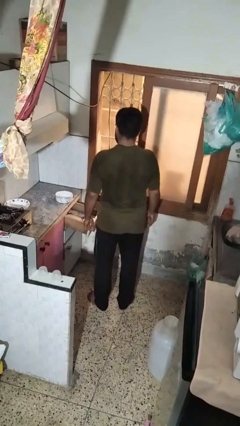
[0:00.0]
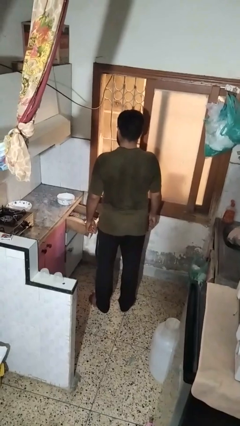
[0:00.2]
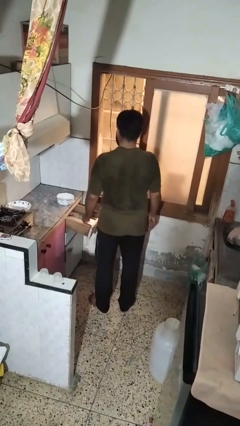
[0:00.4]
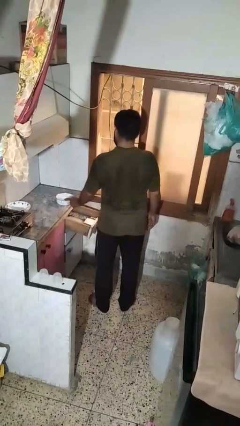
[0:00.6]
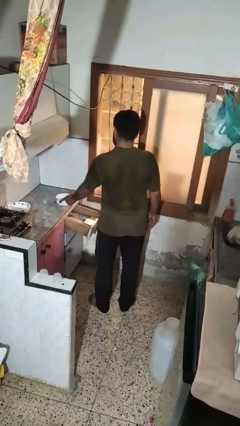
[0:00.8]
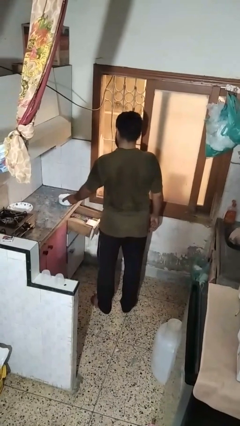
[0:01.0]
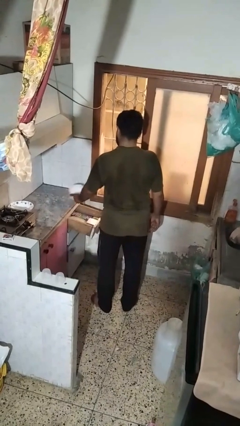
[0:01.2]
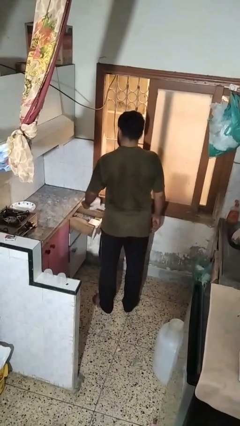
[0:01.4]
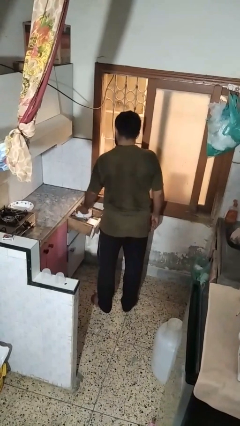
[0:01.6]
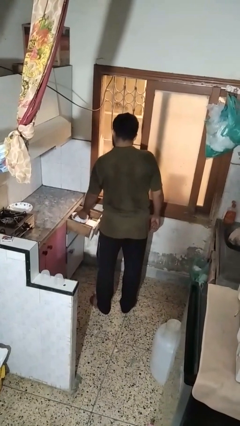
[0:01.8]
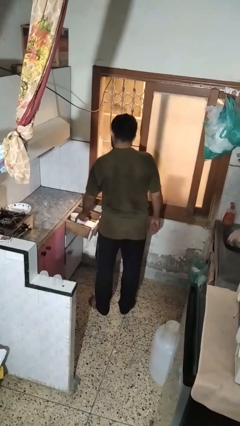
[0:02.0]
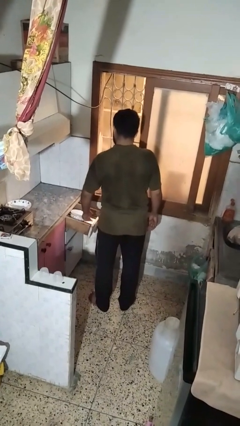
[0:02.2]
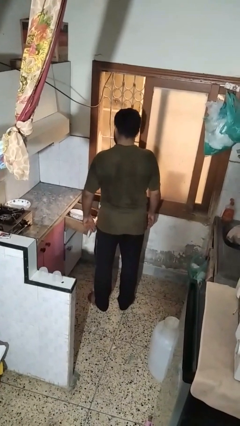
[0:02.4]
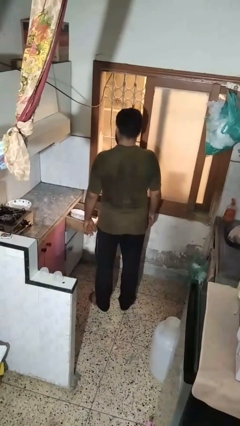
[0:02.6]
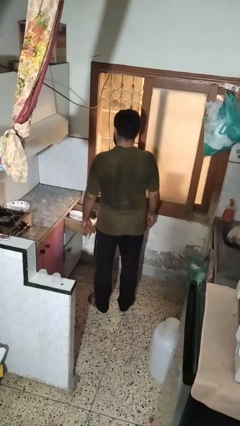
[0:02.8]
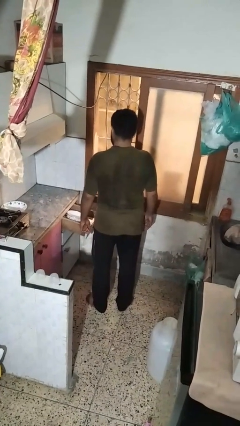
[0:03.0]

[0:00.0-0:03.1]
person puts object into kitchen drawer

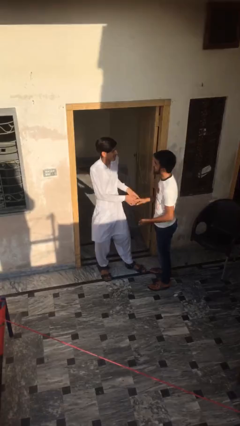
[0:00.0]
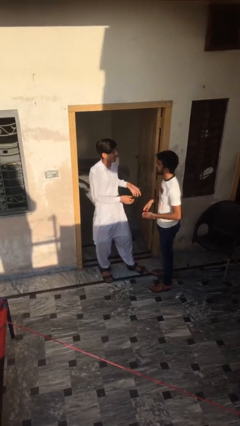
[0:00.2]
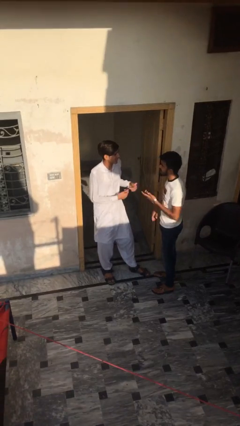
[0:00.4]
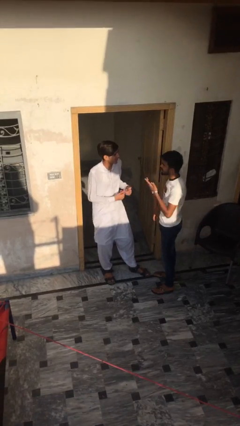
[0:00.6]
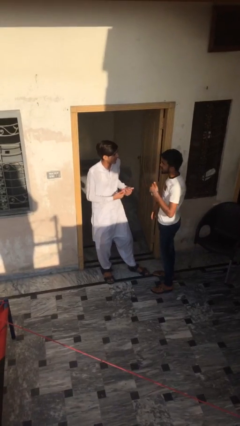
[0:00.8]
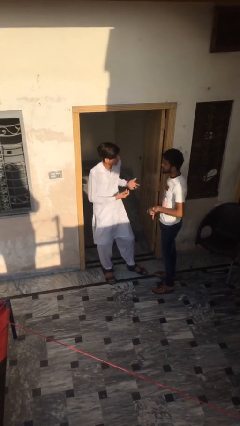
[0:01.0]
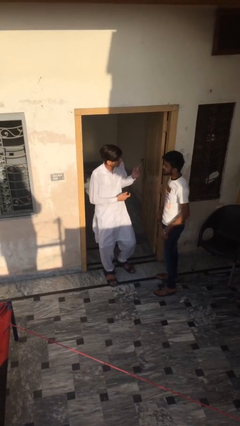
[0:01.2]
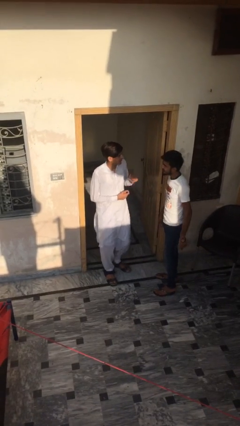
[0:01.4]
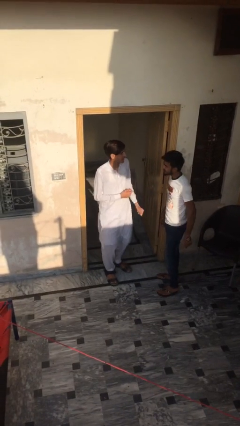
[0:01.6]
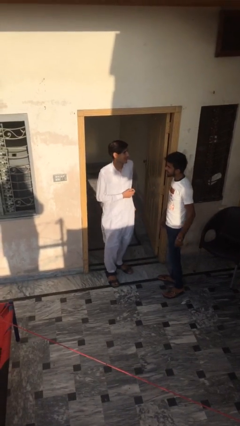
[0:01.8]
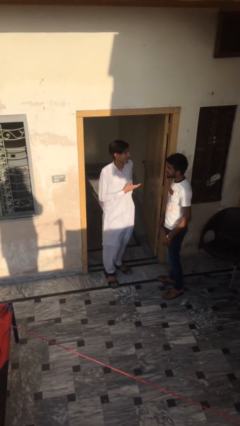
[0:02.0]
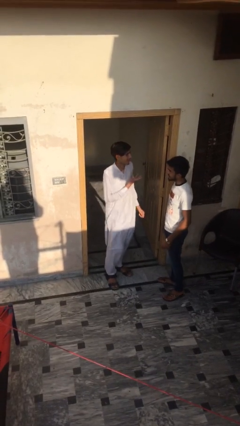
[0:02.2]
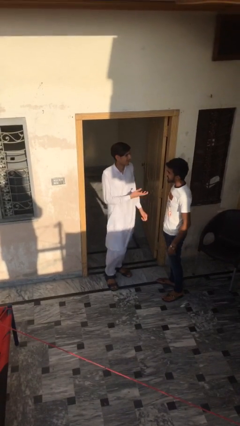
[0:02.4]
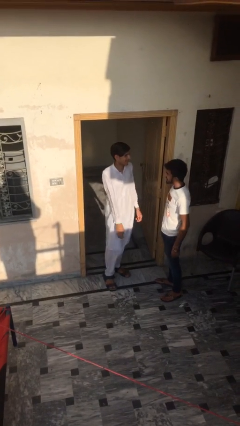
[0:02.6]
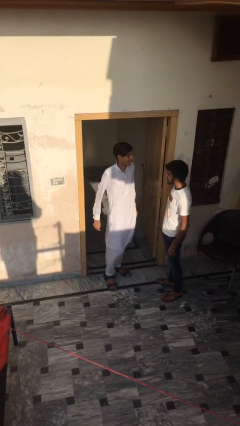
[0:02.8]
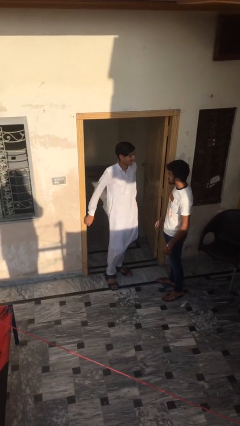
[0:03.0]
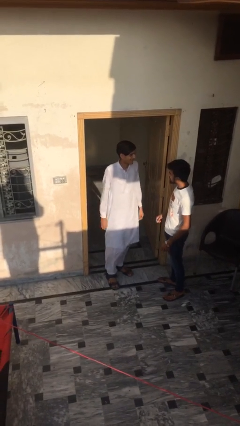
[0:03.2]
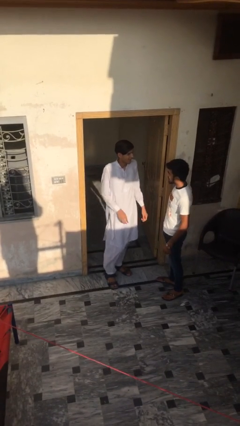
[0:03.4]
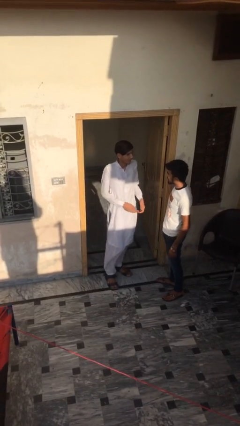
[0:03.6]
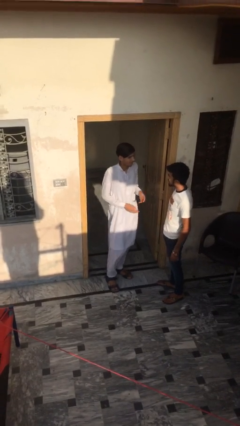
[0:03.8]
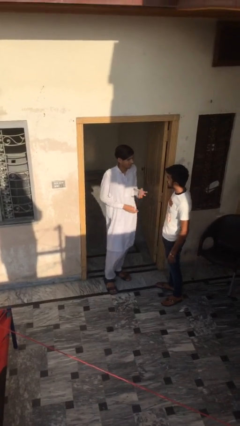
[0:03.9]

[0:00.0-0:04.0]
person talks to person

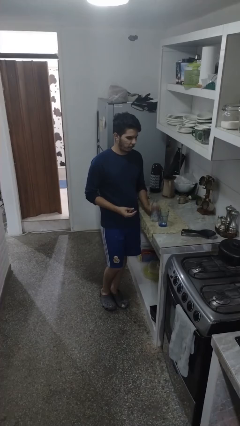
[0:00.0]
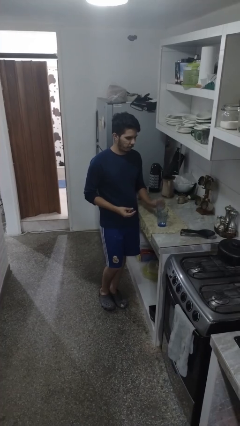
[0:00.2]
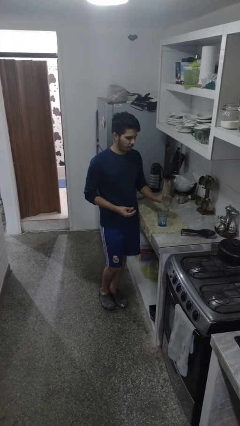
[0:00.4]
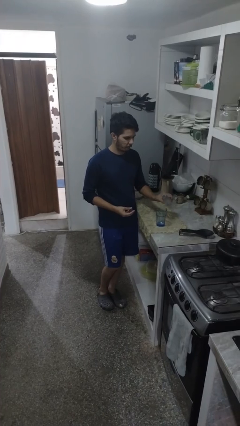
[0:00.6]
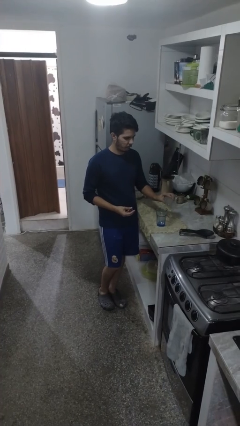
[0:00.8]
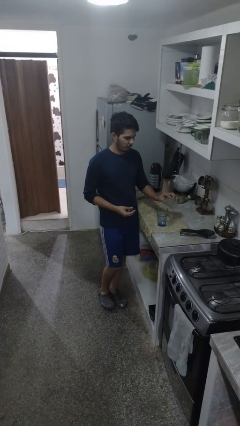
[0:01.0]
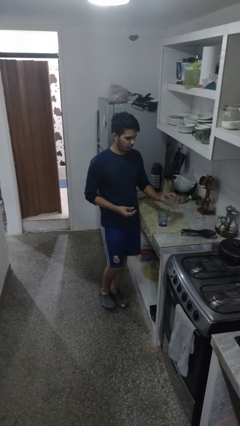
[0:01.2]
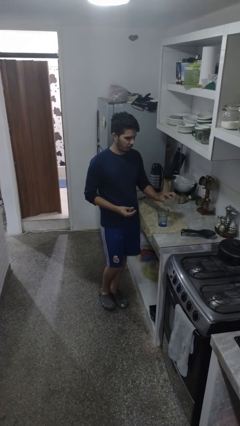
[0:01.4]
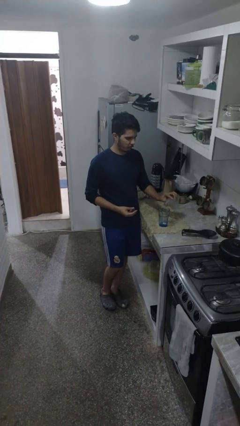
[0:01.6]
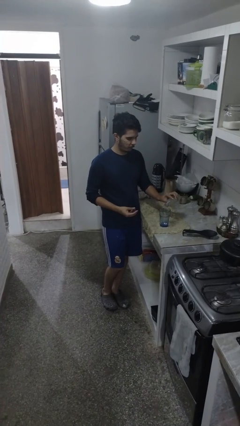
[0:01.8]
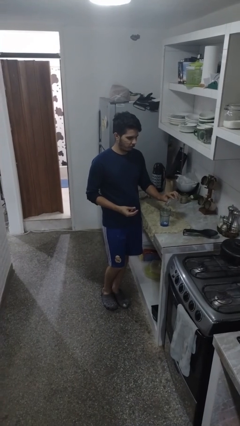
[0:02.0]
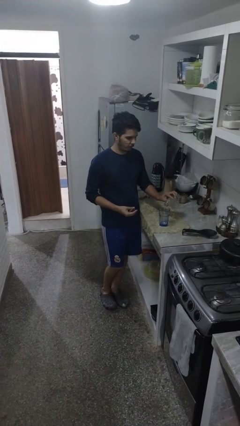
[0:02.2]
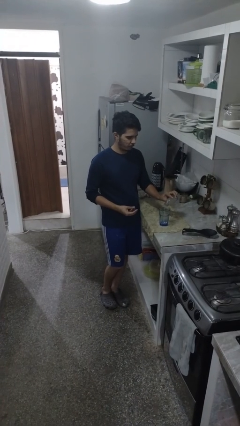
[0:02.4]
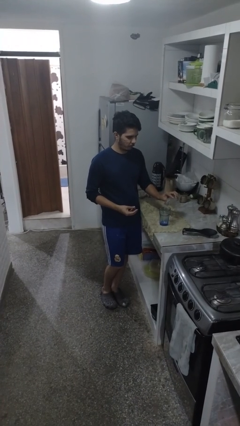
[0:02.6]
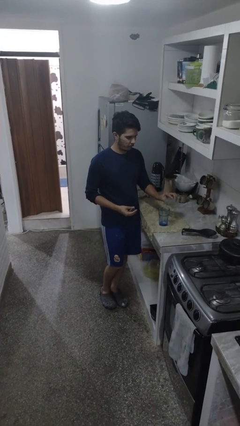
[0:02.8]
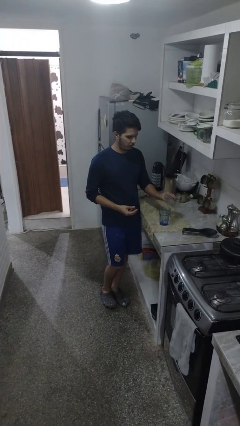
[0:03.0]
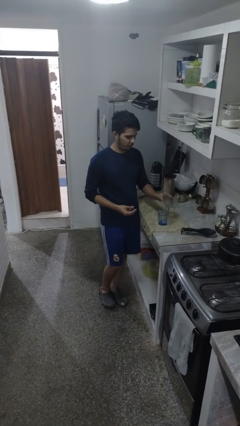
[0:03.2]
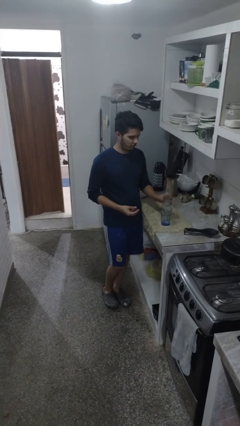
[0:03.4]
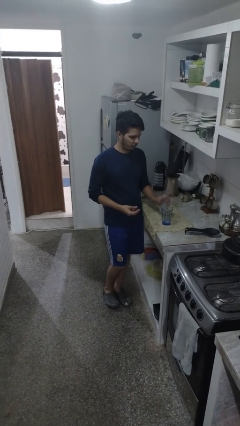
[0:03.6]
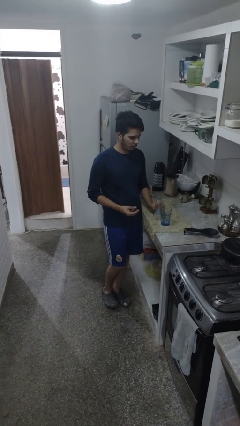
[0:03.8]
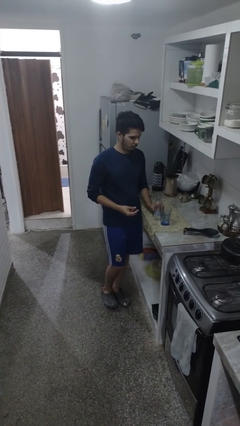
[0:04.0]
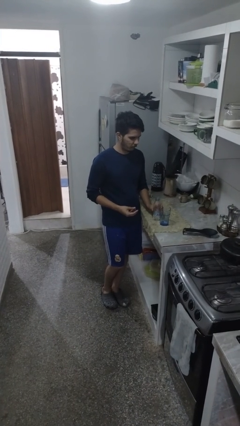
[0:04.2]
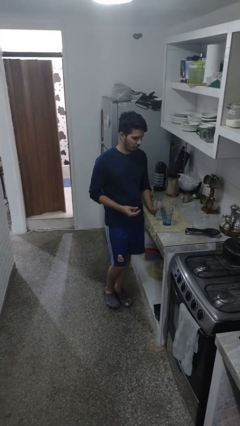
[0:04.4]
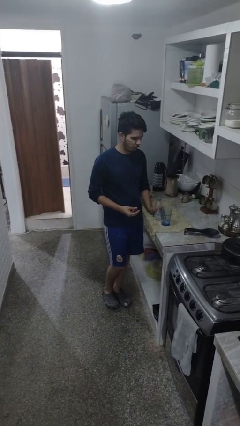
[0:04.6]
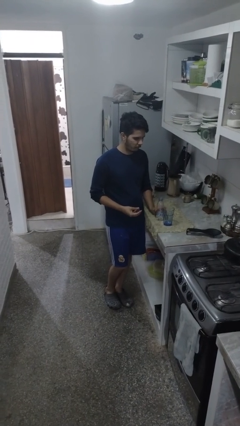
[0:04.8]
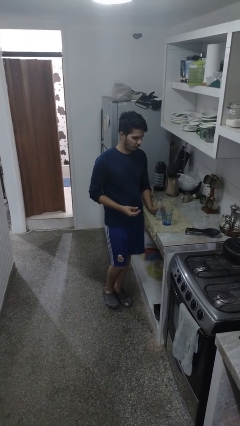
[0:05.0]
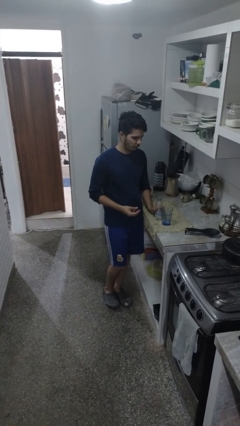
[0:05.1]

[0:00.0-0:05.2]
person pours liquid into cup

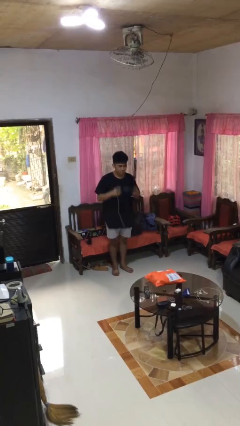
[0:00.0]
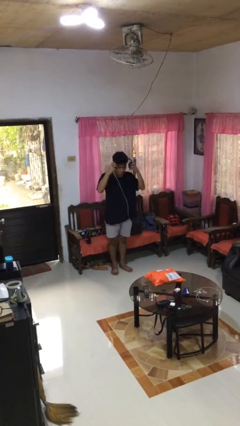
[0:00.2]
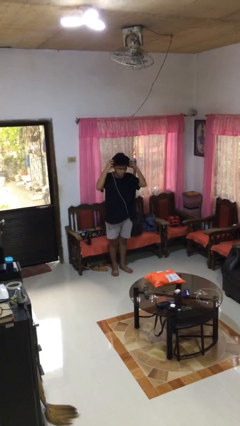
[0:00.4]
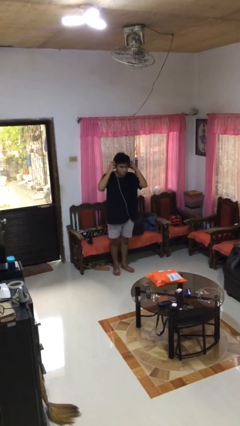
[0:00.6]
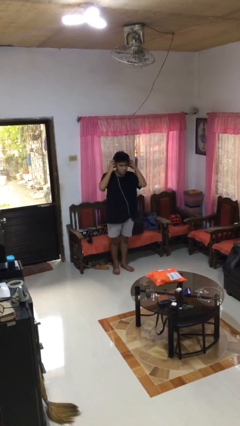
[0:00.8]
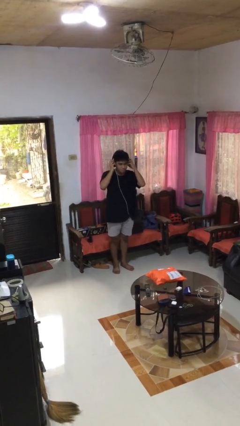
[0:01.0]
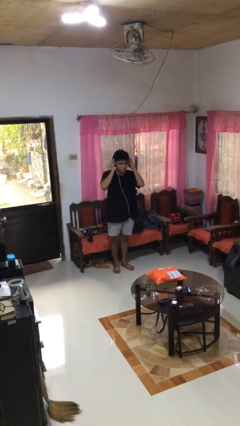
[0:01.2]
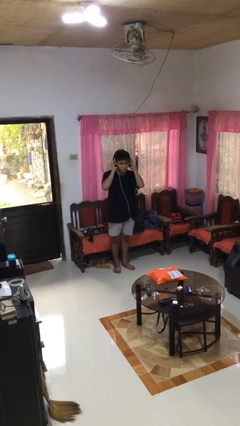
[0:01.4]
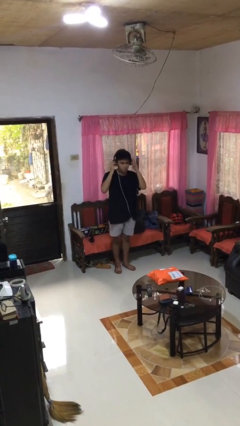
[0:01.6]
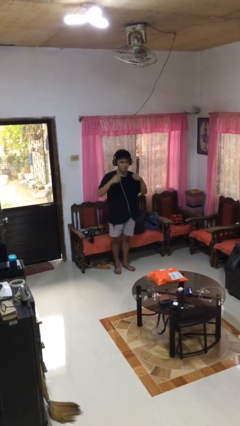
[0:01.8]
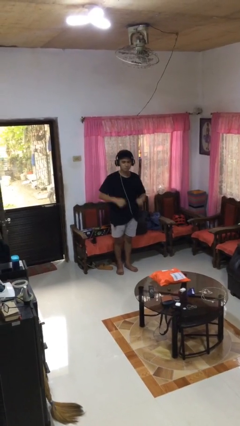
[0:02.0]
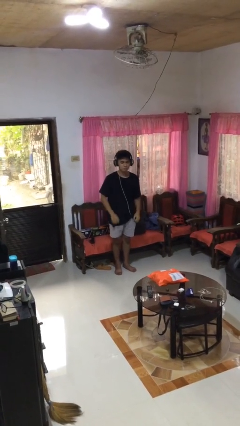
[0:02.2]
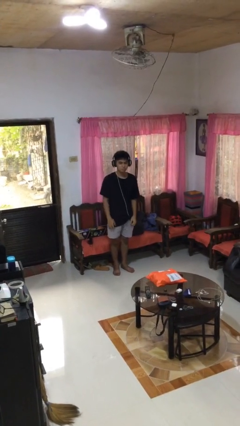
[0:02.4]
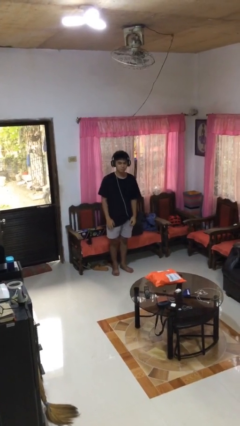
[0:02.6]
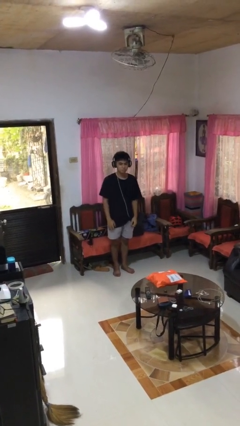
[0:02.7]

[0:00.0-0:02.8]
person puts on headphones

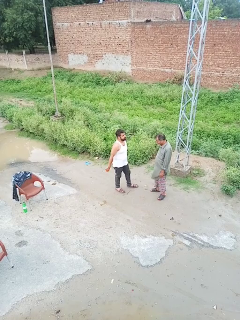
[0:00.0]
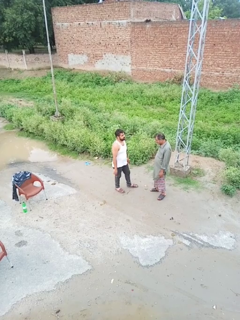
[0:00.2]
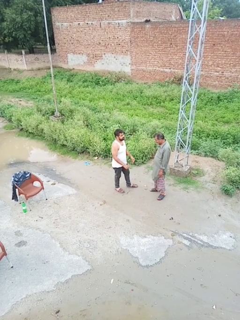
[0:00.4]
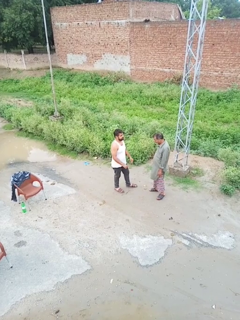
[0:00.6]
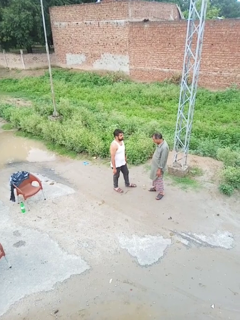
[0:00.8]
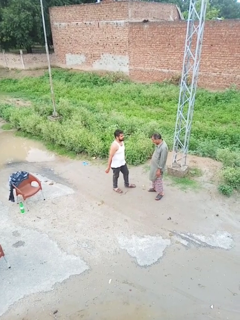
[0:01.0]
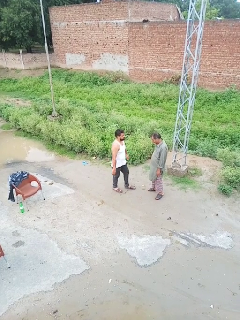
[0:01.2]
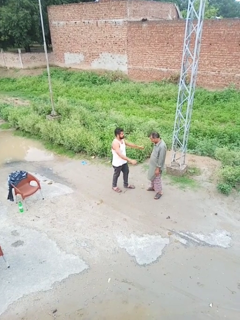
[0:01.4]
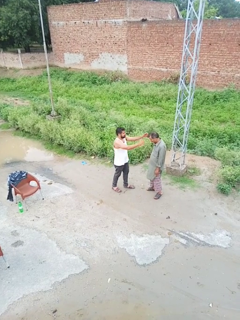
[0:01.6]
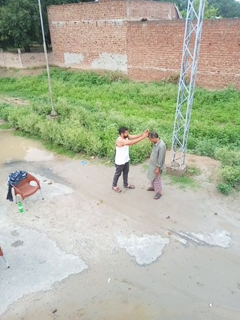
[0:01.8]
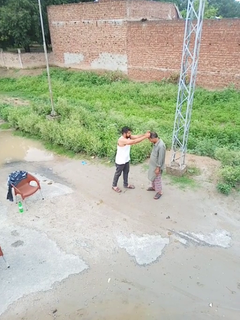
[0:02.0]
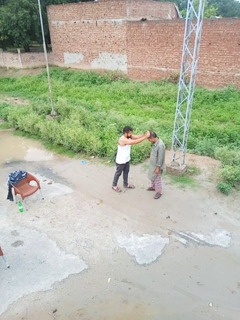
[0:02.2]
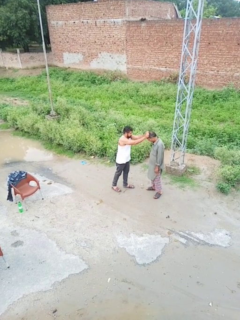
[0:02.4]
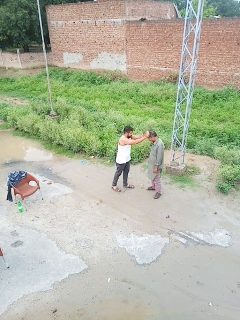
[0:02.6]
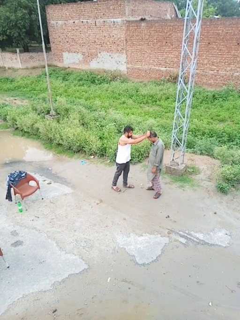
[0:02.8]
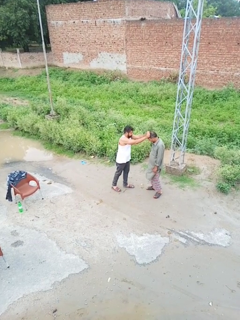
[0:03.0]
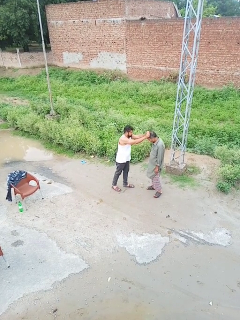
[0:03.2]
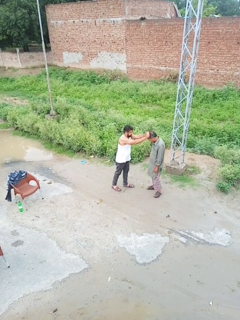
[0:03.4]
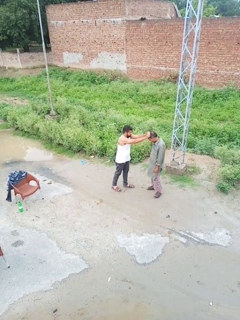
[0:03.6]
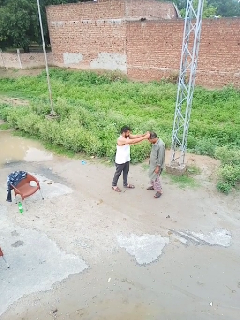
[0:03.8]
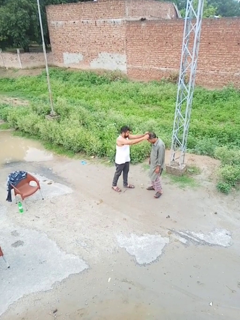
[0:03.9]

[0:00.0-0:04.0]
person grabs person by hair
